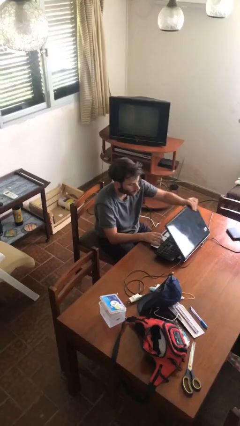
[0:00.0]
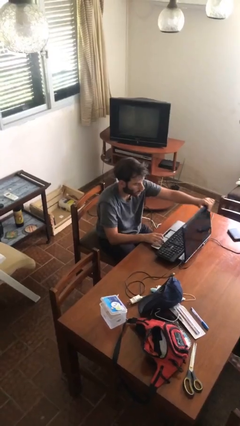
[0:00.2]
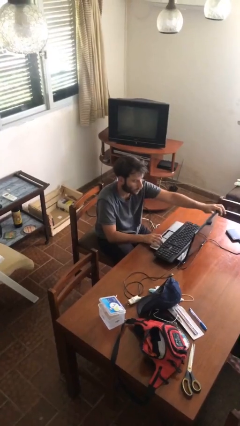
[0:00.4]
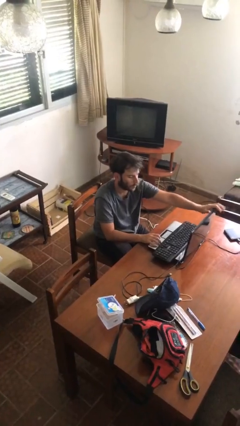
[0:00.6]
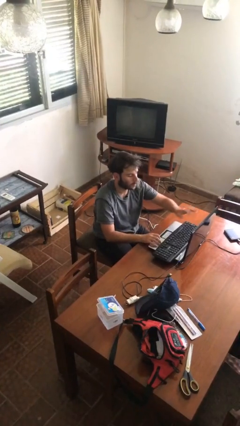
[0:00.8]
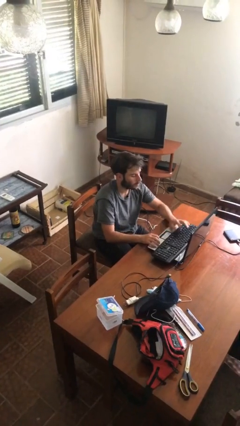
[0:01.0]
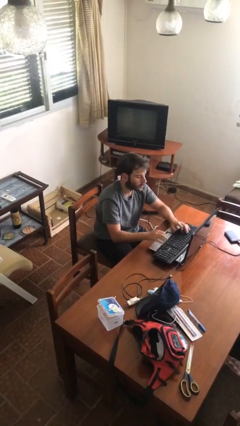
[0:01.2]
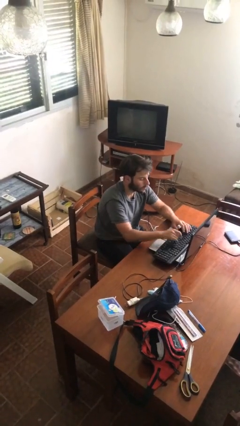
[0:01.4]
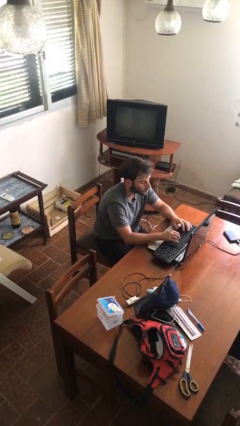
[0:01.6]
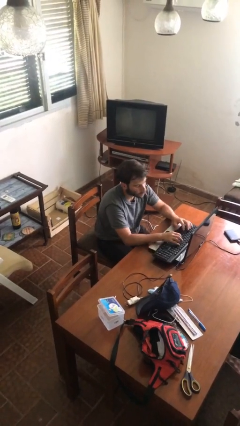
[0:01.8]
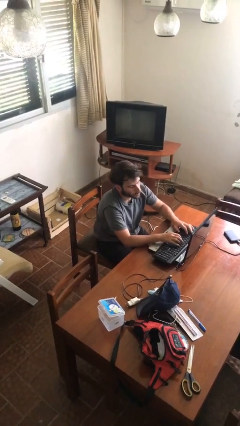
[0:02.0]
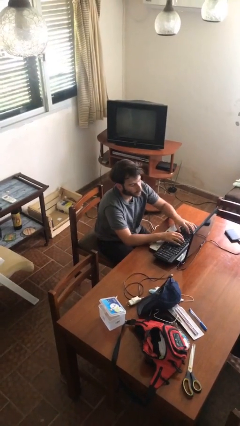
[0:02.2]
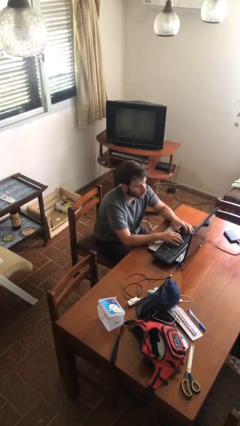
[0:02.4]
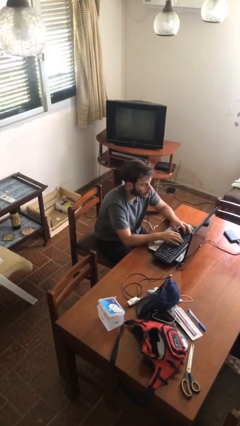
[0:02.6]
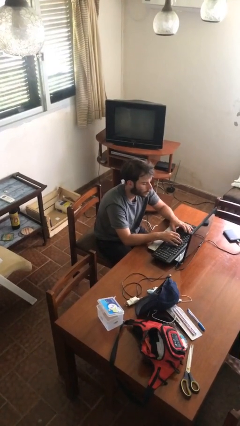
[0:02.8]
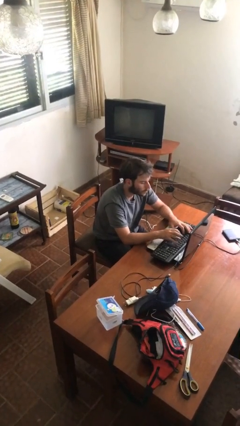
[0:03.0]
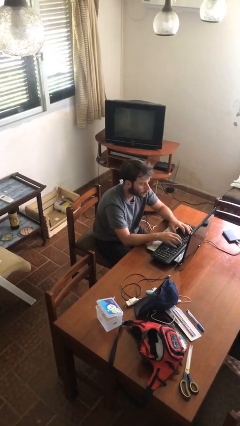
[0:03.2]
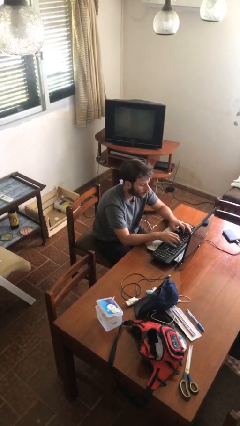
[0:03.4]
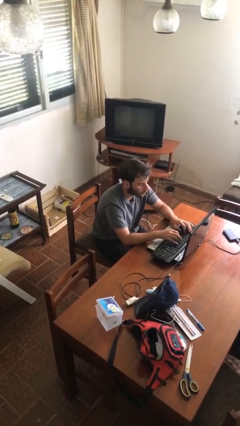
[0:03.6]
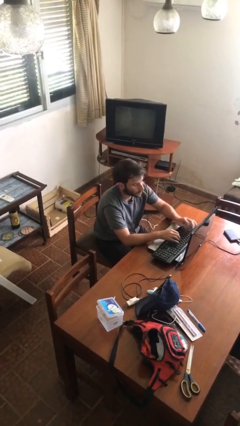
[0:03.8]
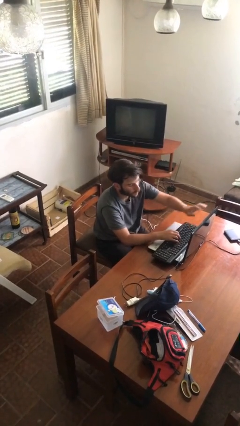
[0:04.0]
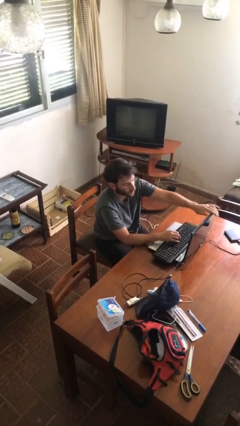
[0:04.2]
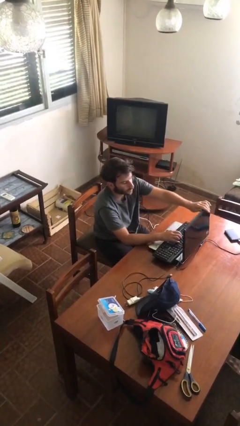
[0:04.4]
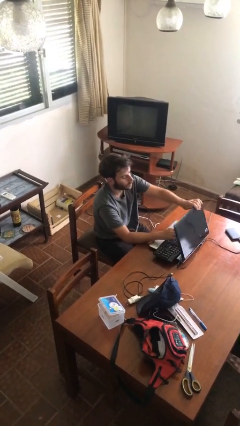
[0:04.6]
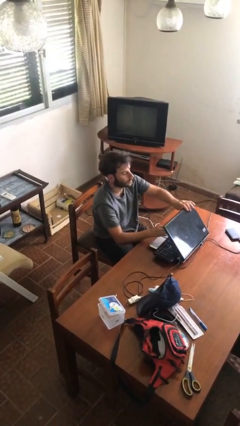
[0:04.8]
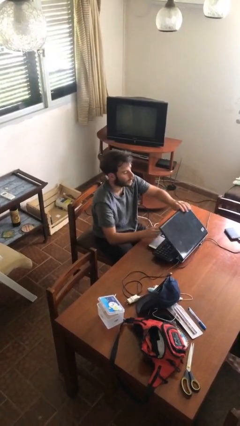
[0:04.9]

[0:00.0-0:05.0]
person interacts with laptop

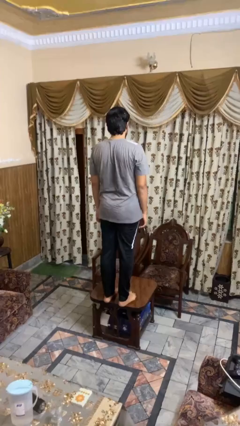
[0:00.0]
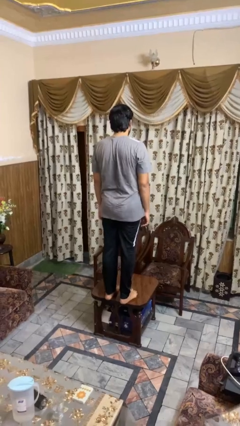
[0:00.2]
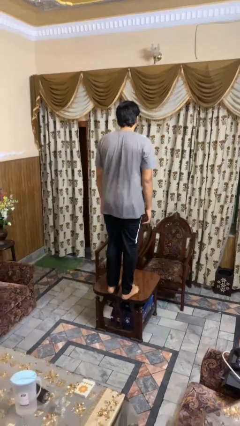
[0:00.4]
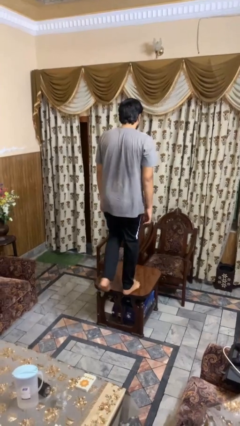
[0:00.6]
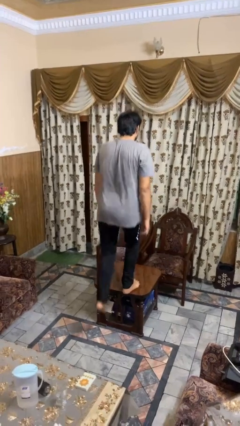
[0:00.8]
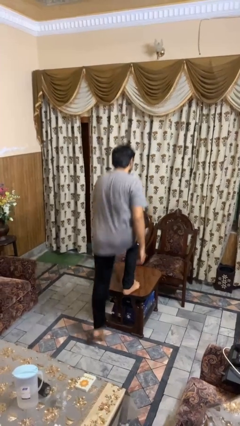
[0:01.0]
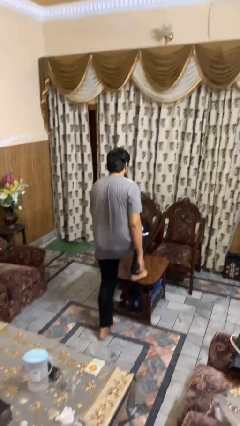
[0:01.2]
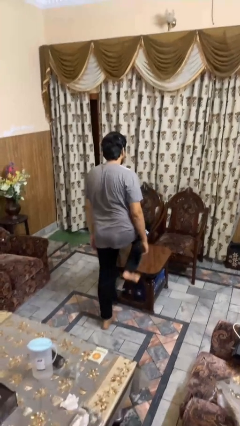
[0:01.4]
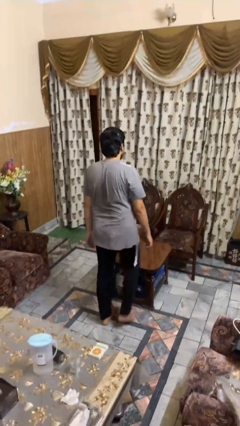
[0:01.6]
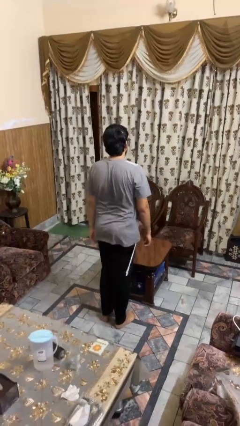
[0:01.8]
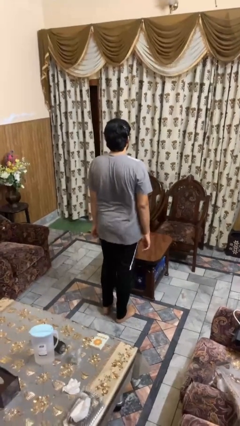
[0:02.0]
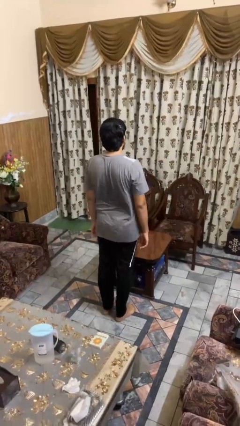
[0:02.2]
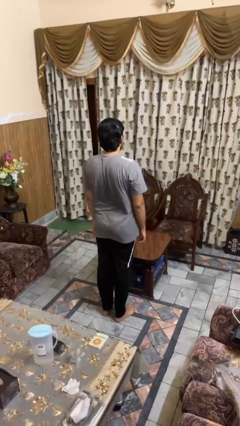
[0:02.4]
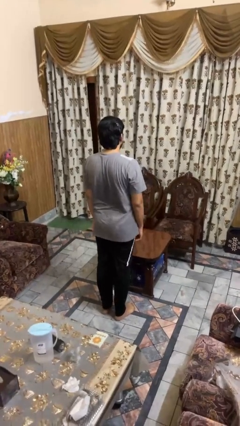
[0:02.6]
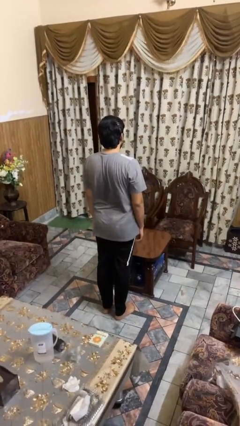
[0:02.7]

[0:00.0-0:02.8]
person climbs off table

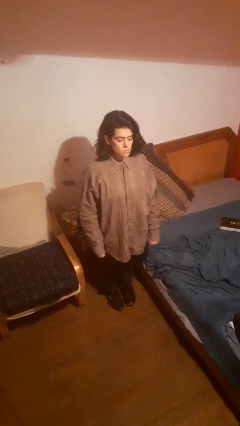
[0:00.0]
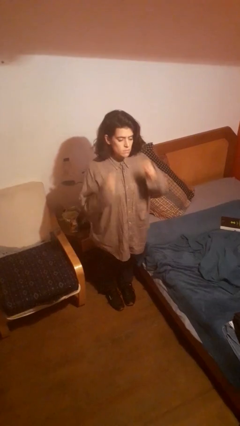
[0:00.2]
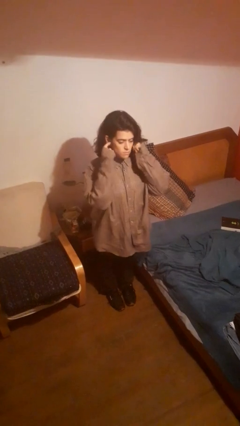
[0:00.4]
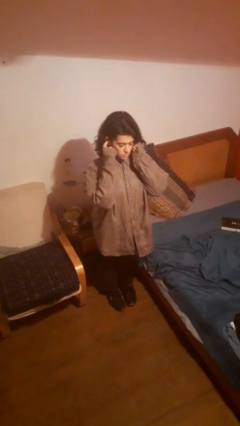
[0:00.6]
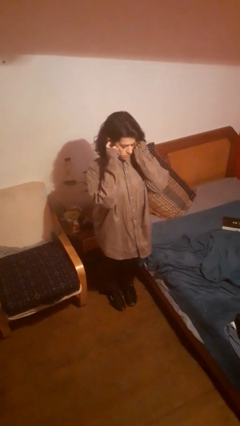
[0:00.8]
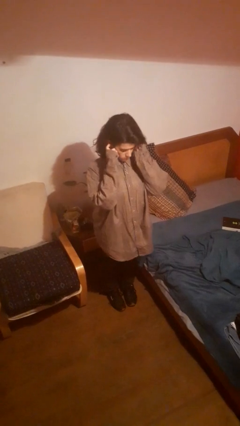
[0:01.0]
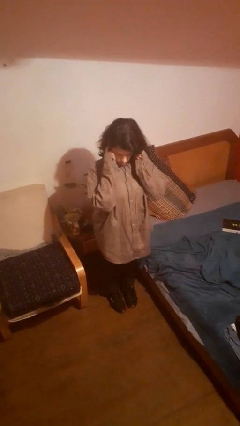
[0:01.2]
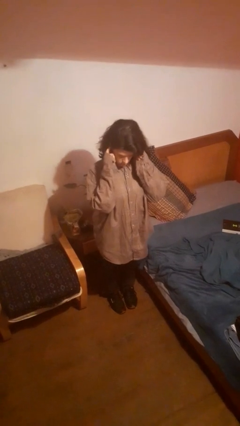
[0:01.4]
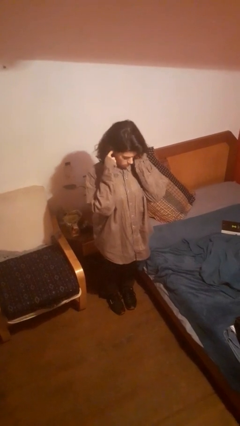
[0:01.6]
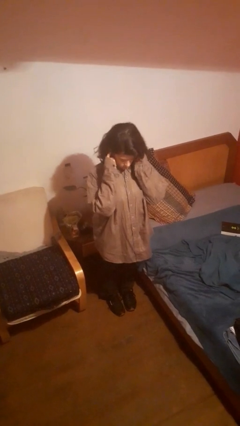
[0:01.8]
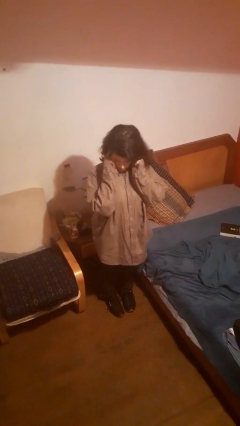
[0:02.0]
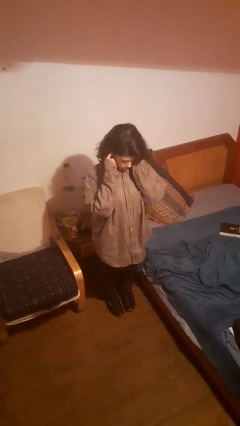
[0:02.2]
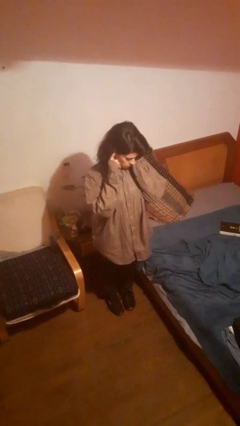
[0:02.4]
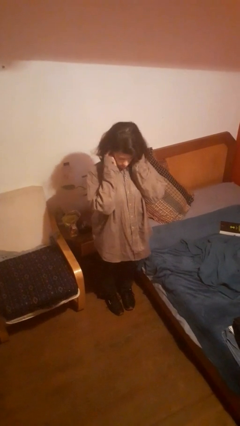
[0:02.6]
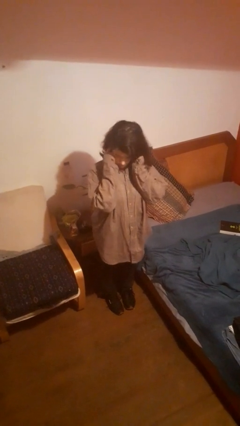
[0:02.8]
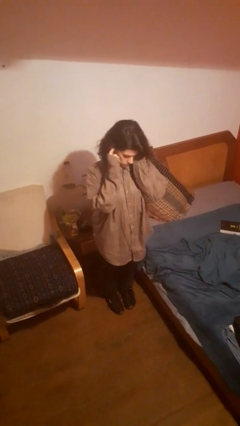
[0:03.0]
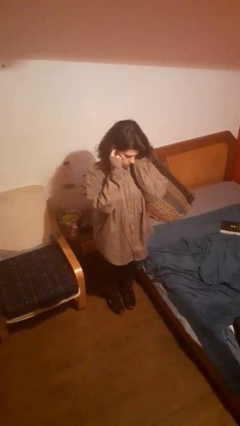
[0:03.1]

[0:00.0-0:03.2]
person puts fingers in ear

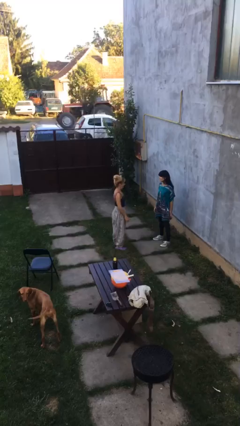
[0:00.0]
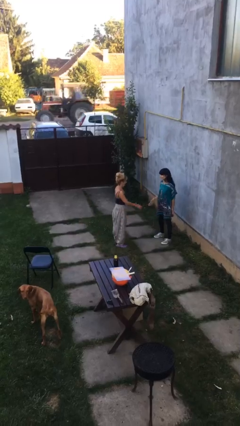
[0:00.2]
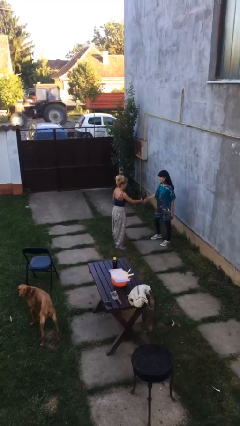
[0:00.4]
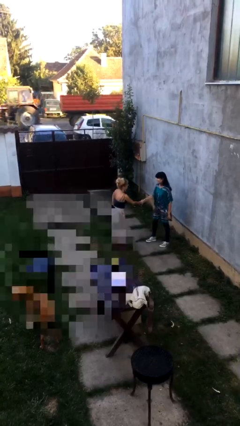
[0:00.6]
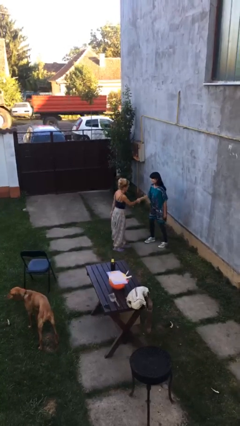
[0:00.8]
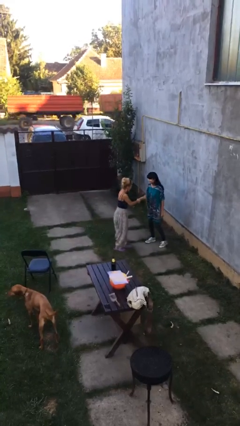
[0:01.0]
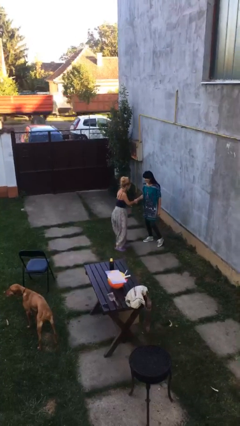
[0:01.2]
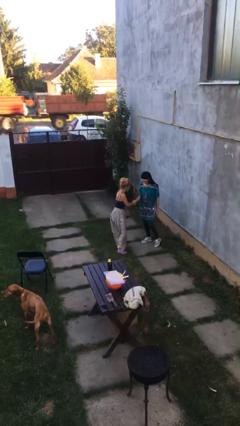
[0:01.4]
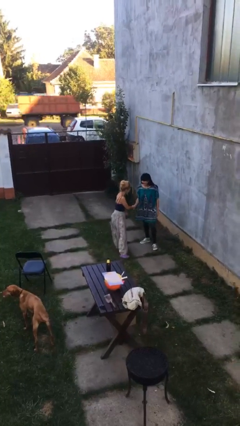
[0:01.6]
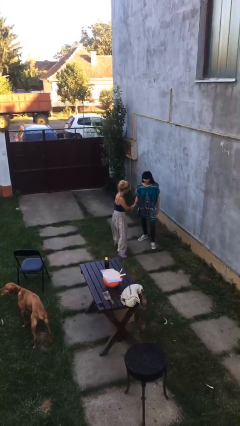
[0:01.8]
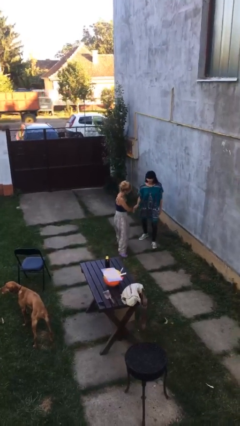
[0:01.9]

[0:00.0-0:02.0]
person shakes hand

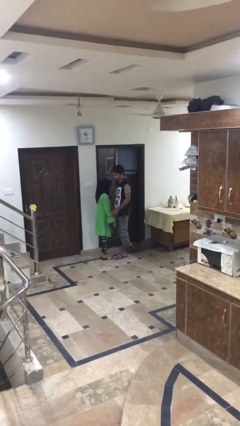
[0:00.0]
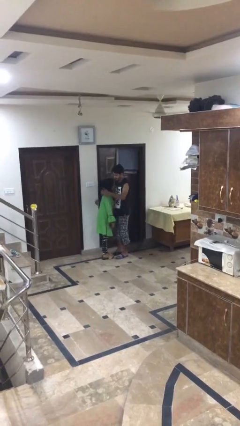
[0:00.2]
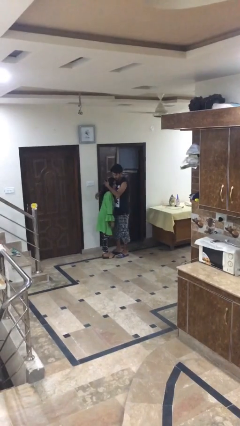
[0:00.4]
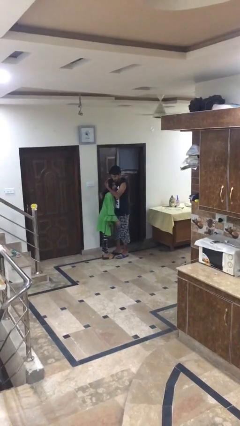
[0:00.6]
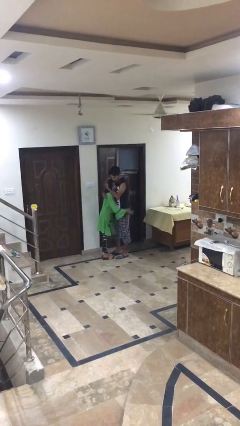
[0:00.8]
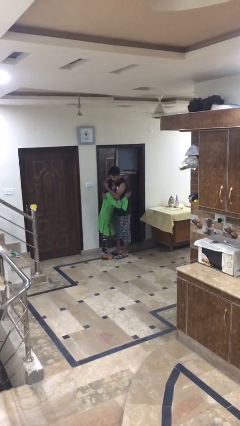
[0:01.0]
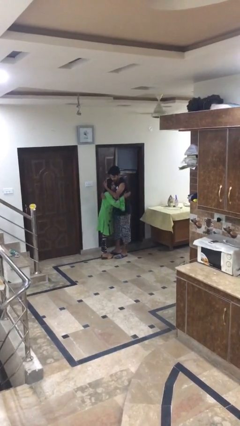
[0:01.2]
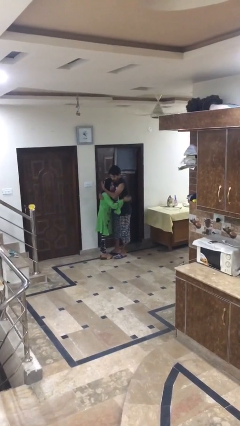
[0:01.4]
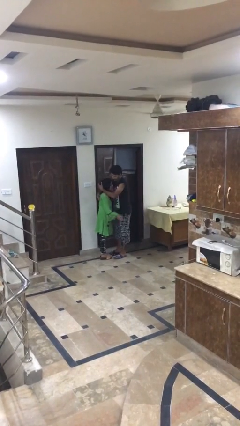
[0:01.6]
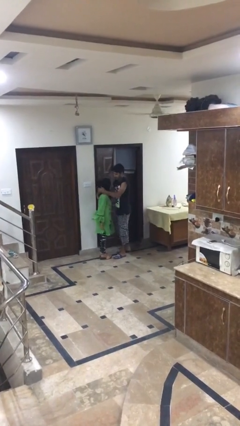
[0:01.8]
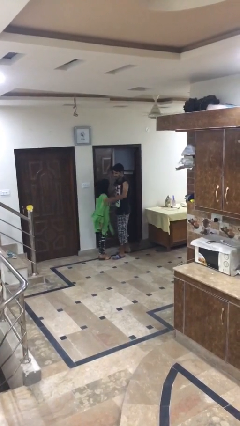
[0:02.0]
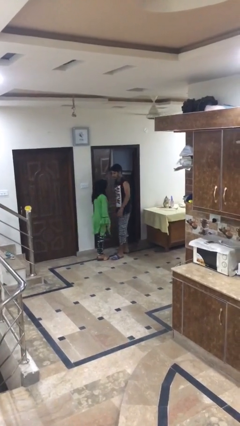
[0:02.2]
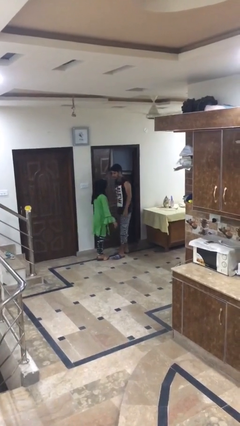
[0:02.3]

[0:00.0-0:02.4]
person embraces person

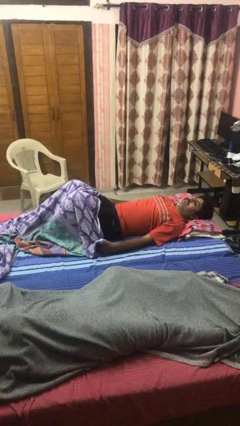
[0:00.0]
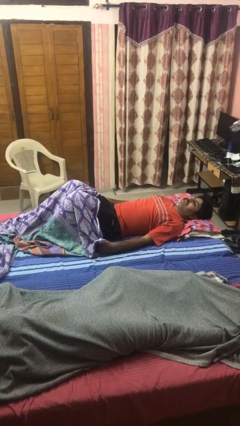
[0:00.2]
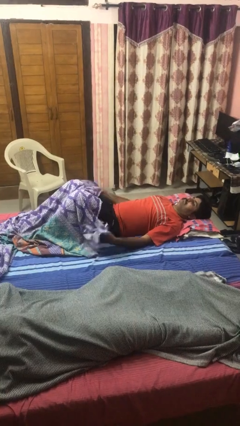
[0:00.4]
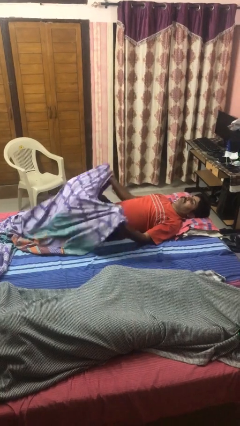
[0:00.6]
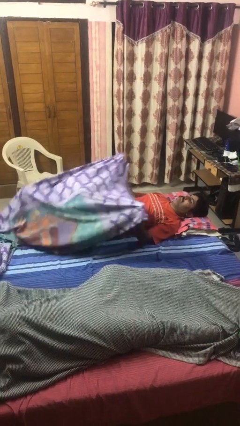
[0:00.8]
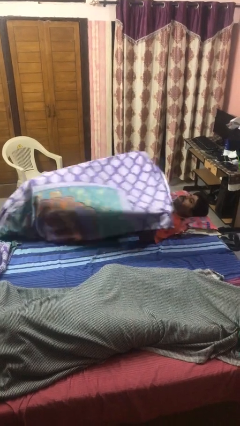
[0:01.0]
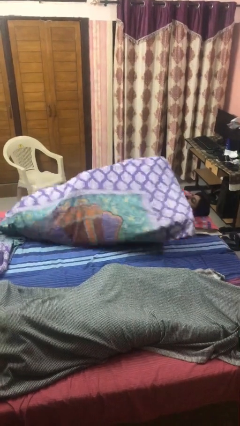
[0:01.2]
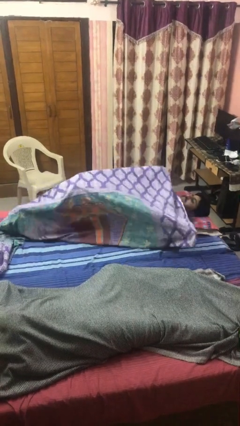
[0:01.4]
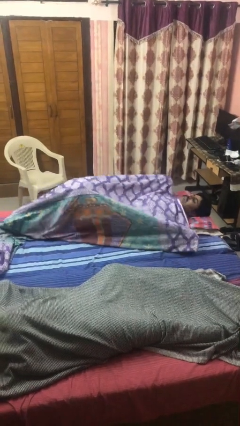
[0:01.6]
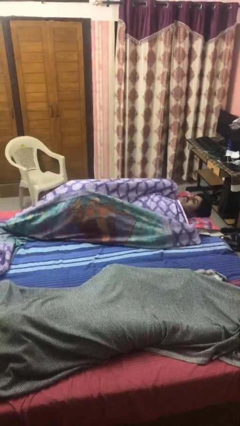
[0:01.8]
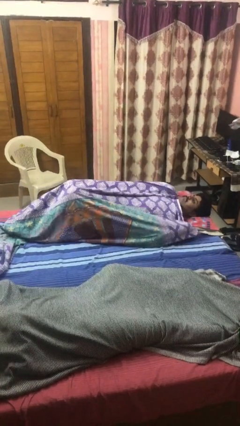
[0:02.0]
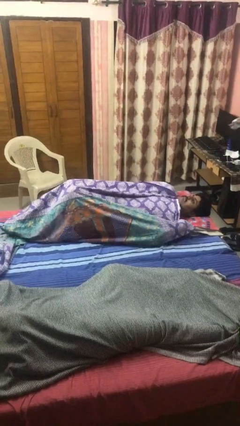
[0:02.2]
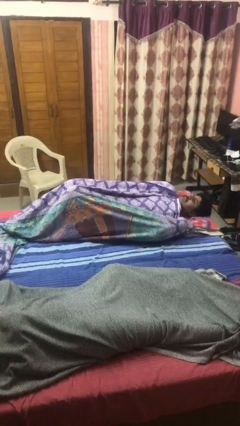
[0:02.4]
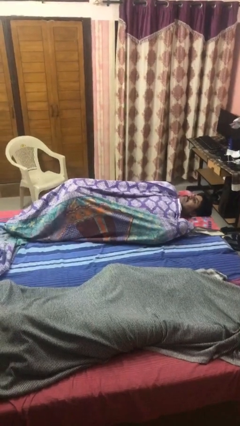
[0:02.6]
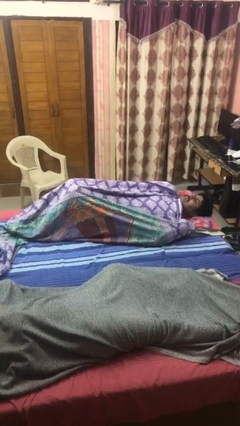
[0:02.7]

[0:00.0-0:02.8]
person covers with bedsheets
